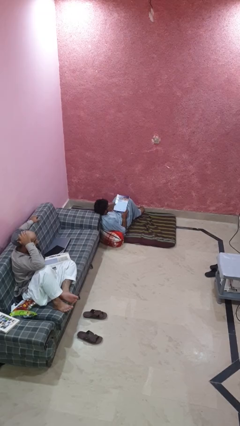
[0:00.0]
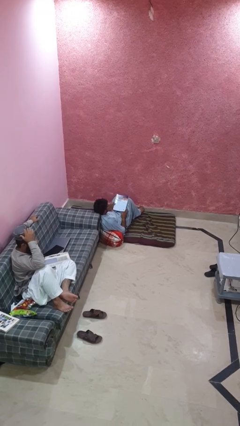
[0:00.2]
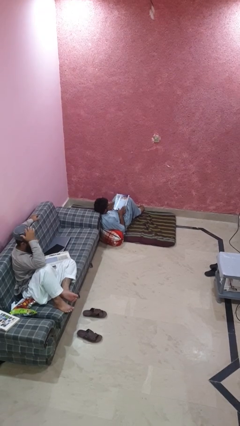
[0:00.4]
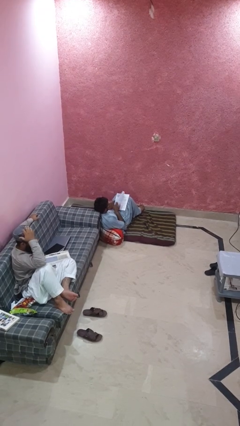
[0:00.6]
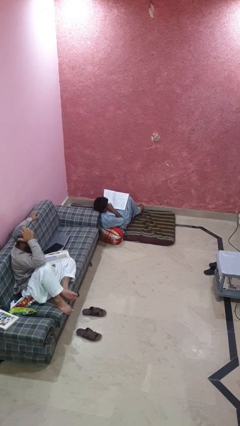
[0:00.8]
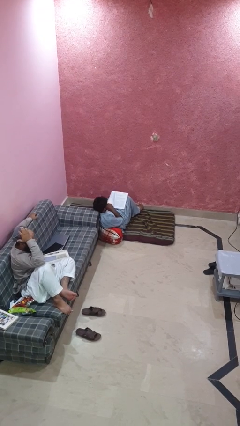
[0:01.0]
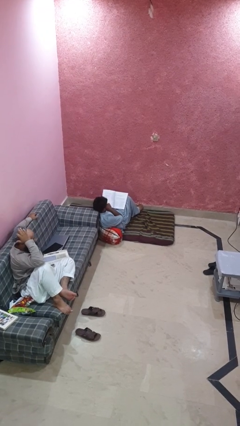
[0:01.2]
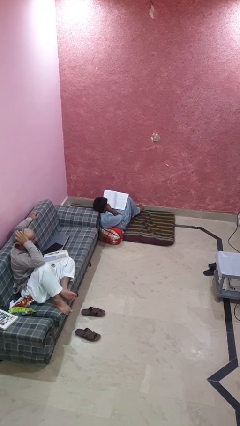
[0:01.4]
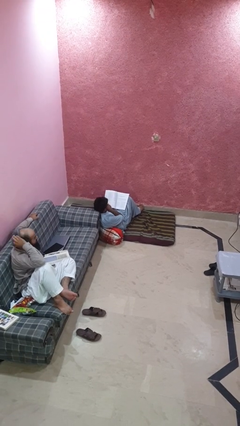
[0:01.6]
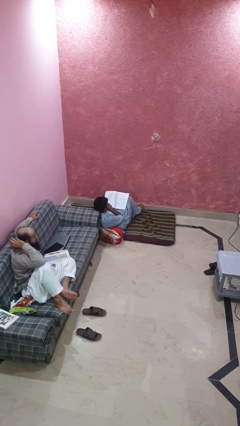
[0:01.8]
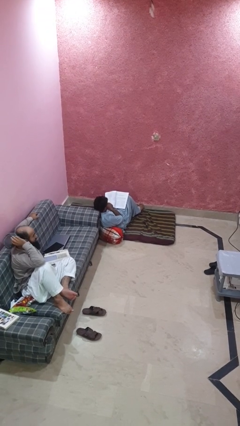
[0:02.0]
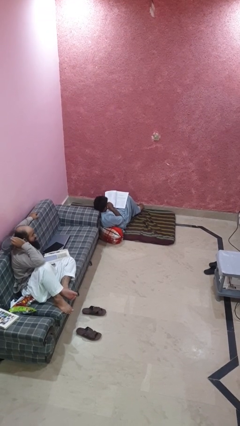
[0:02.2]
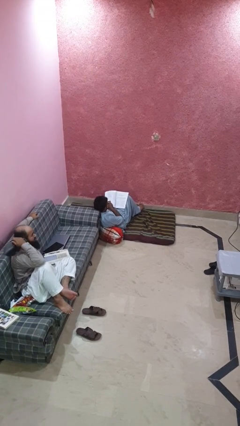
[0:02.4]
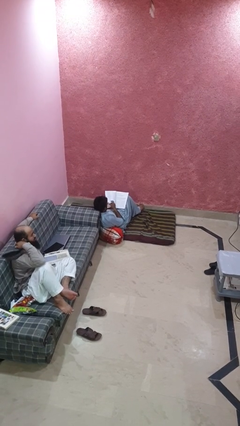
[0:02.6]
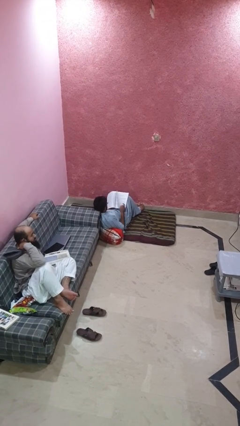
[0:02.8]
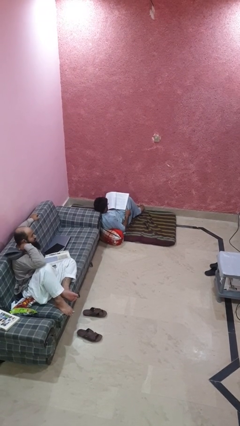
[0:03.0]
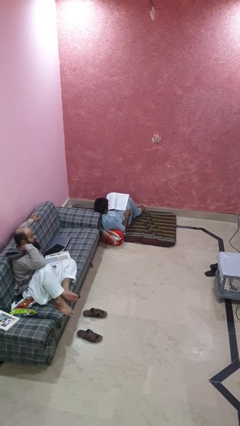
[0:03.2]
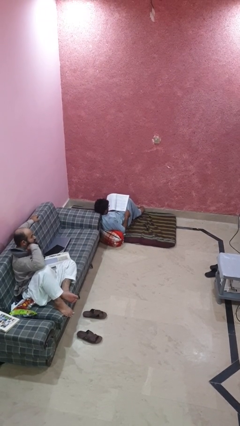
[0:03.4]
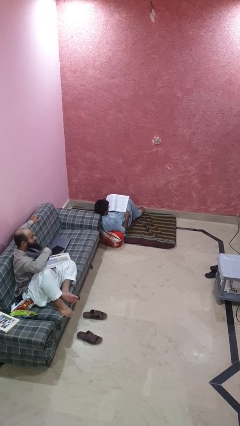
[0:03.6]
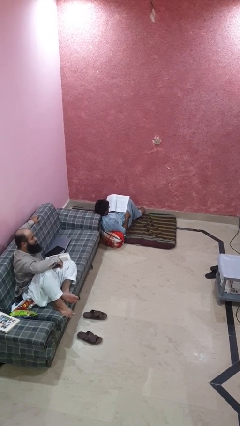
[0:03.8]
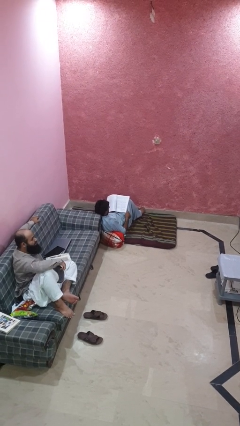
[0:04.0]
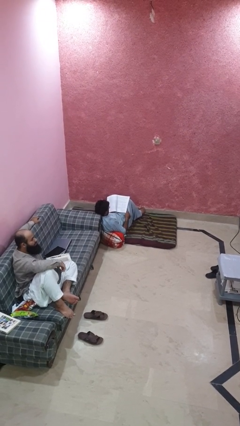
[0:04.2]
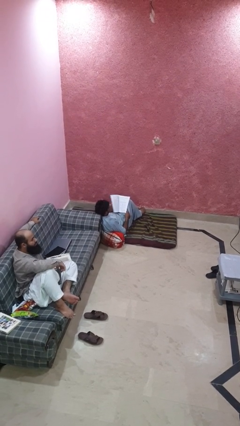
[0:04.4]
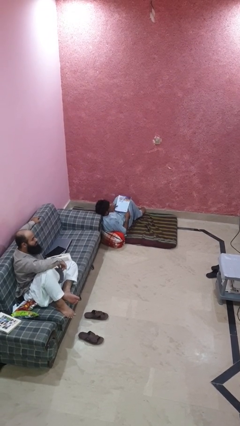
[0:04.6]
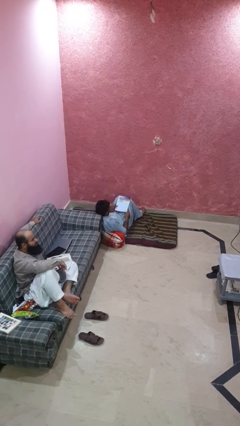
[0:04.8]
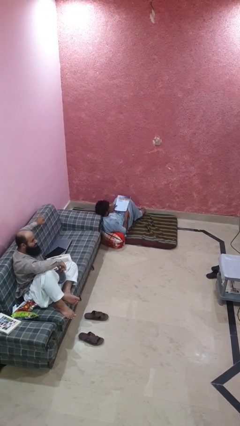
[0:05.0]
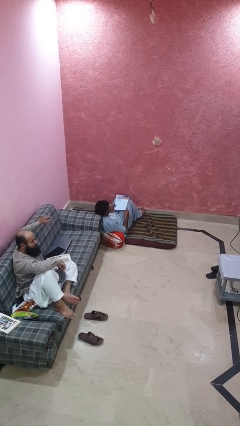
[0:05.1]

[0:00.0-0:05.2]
person reads magazine

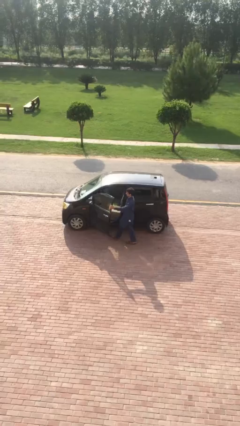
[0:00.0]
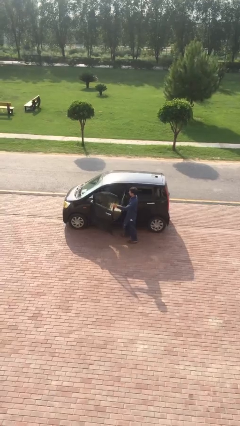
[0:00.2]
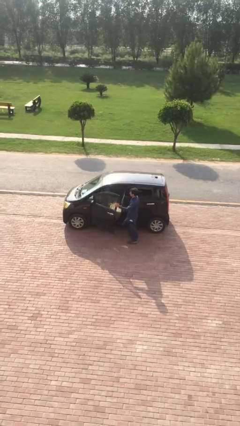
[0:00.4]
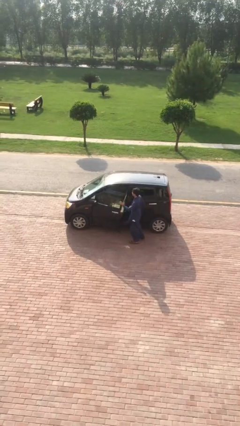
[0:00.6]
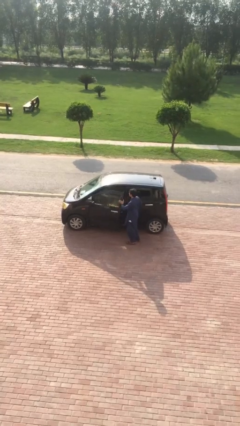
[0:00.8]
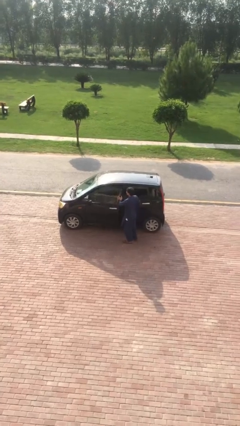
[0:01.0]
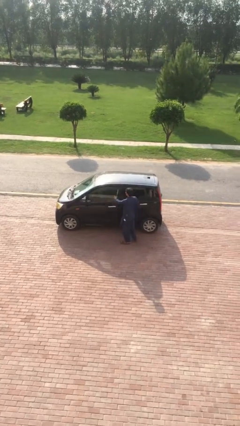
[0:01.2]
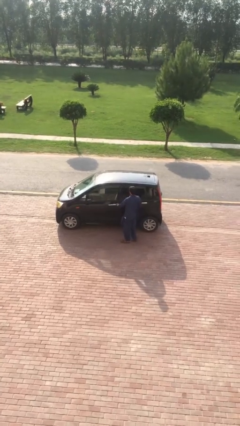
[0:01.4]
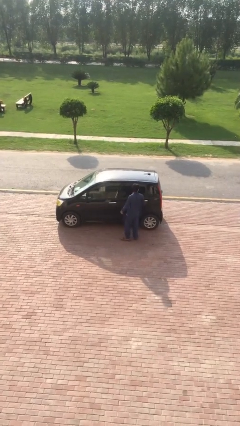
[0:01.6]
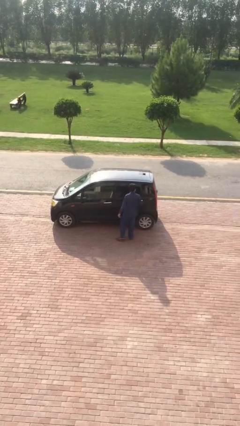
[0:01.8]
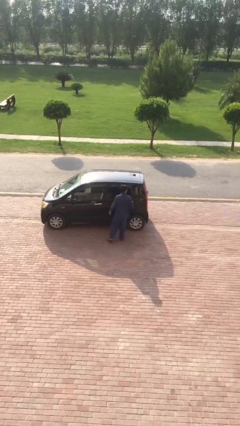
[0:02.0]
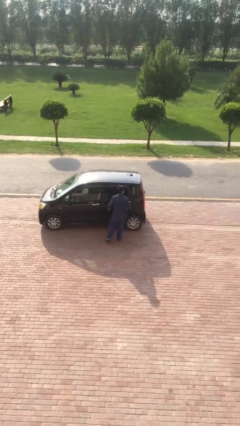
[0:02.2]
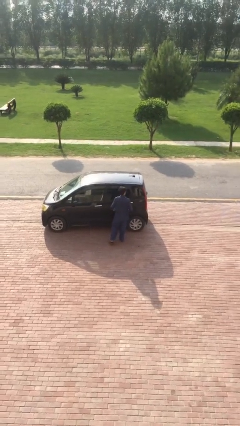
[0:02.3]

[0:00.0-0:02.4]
person closes car door

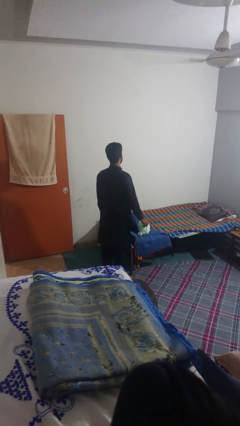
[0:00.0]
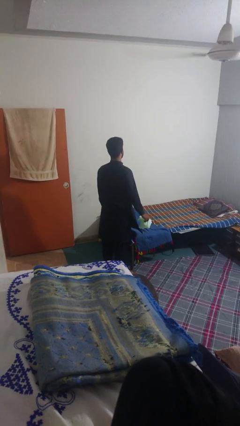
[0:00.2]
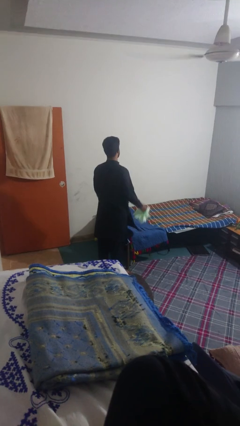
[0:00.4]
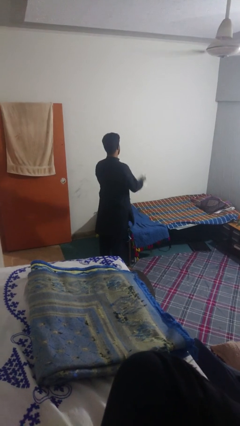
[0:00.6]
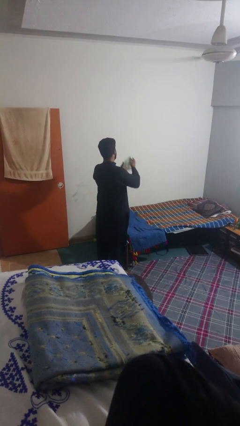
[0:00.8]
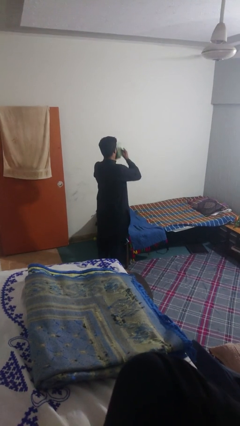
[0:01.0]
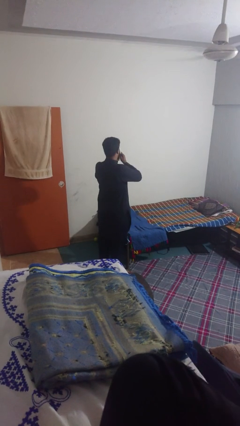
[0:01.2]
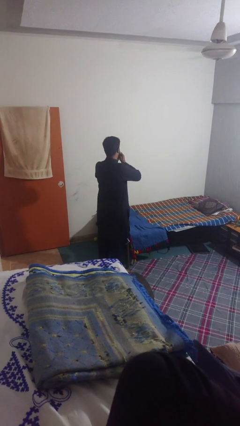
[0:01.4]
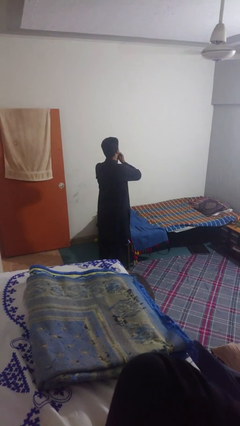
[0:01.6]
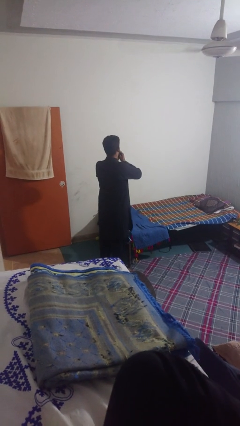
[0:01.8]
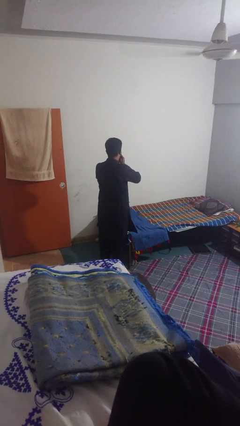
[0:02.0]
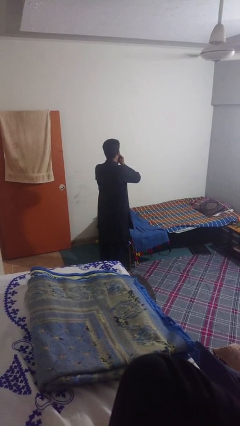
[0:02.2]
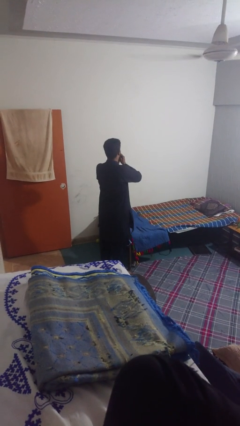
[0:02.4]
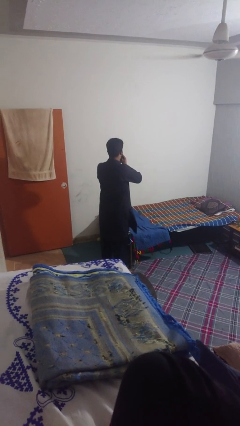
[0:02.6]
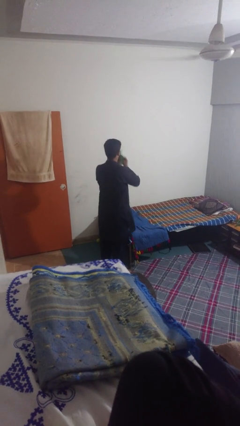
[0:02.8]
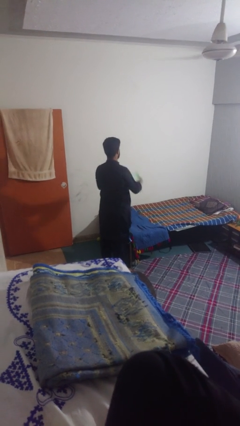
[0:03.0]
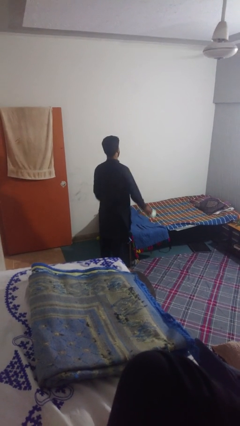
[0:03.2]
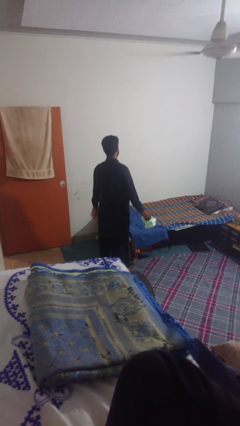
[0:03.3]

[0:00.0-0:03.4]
person blows nose

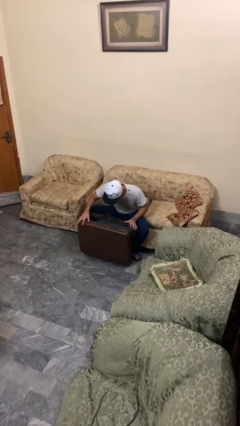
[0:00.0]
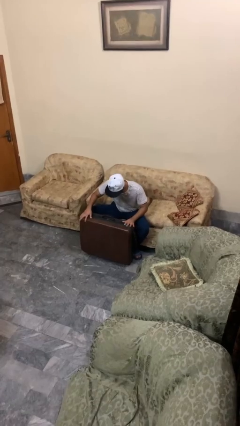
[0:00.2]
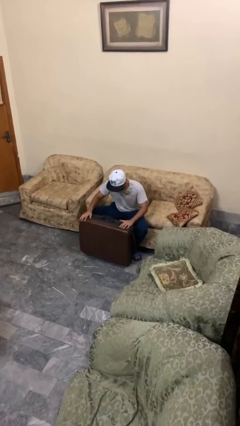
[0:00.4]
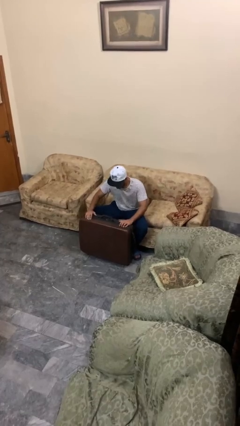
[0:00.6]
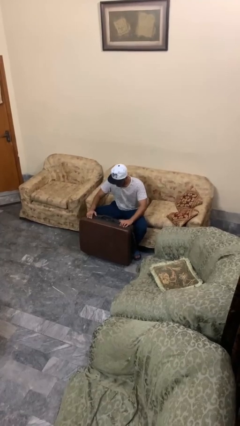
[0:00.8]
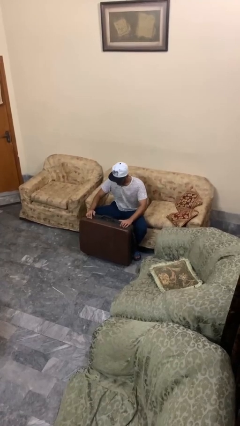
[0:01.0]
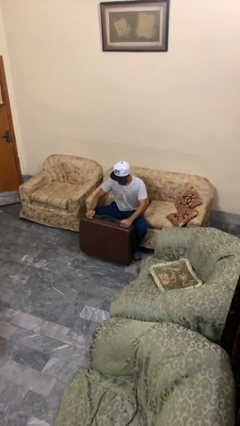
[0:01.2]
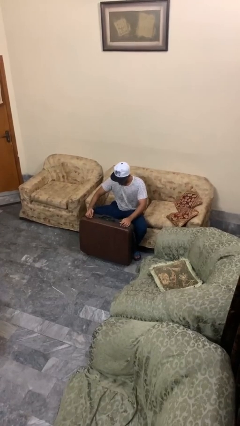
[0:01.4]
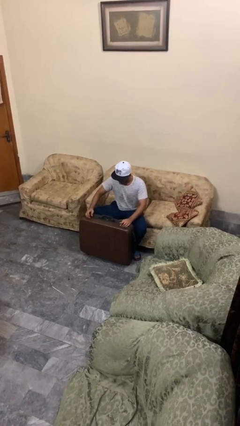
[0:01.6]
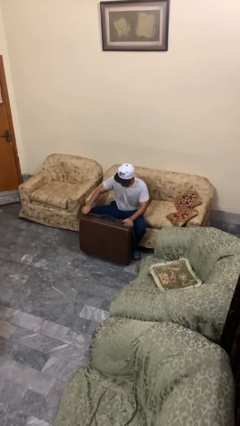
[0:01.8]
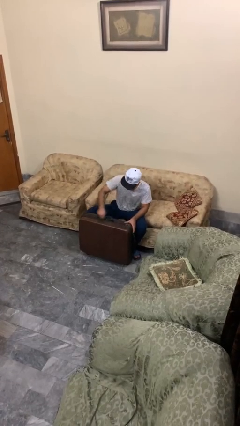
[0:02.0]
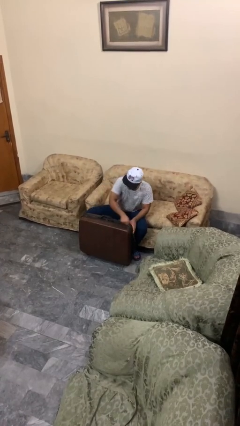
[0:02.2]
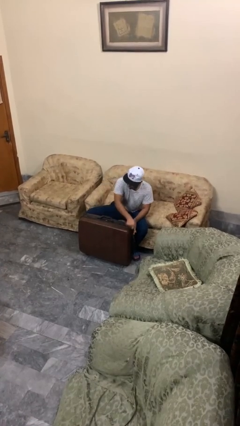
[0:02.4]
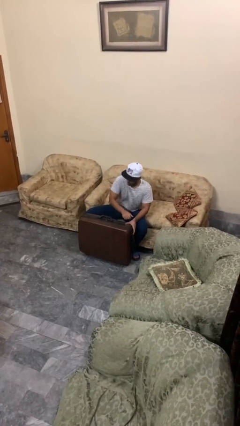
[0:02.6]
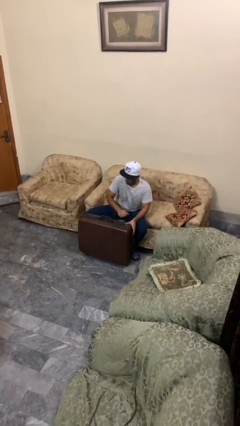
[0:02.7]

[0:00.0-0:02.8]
person closes suitcase

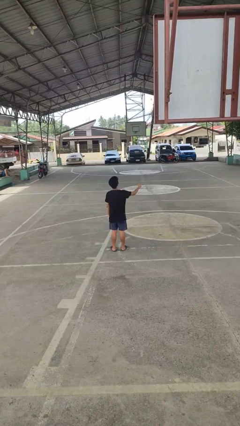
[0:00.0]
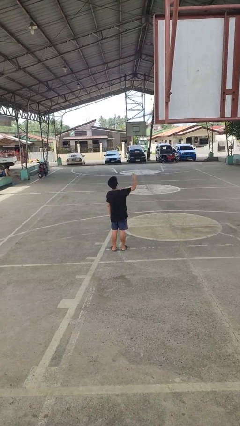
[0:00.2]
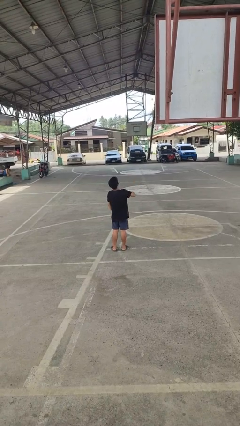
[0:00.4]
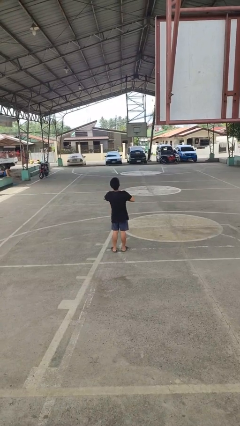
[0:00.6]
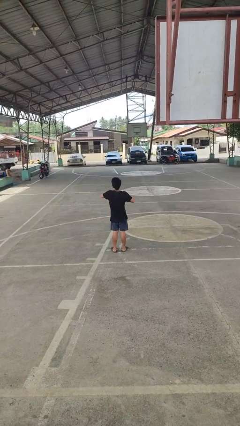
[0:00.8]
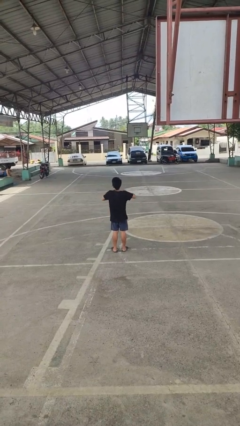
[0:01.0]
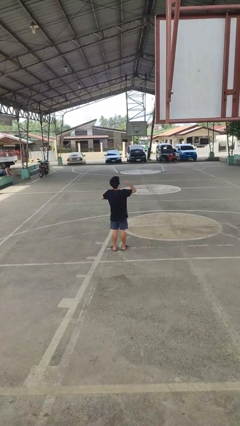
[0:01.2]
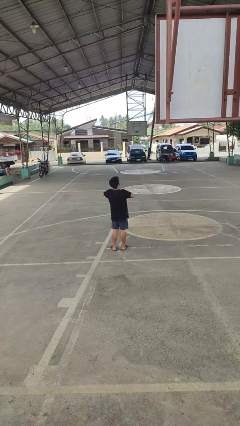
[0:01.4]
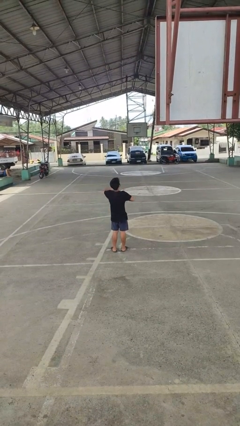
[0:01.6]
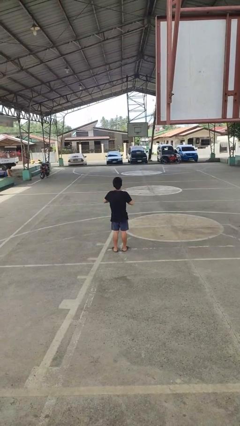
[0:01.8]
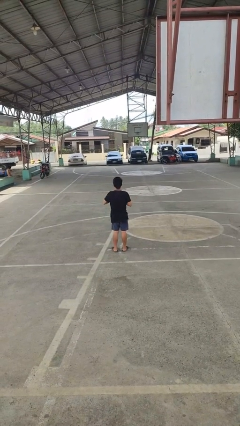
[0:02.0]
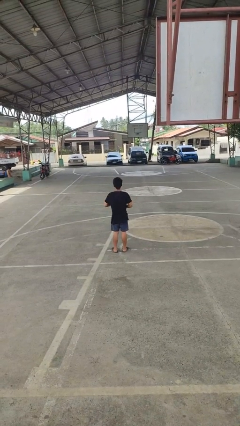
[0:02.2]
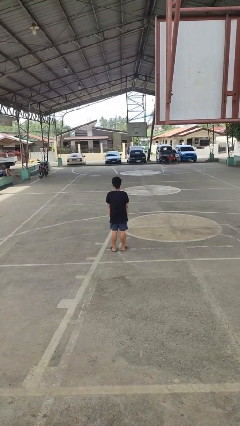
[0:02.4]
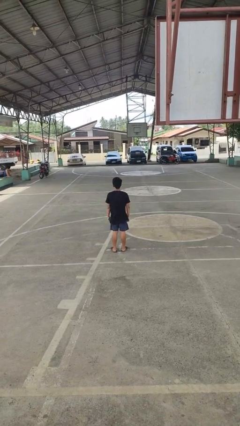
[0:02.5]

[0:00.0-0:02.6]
person drums on chest

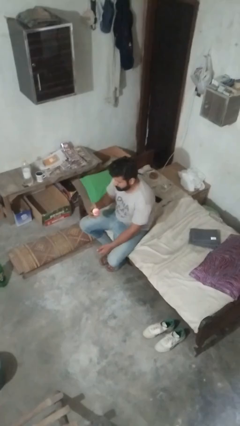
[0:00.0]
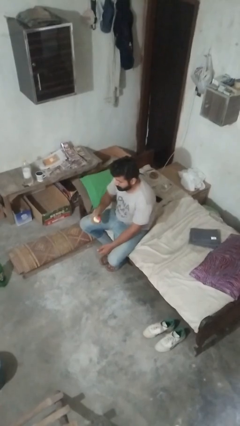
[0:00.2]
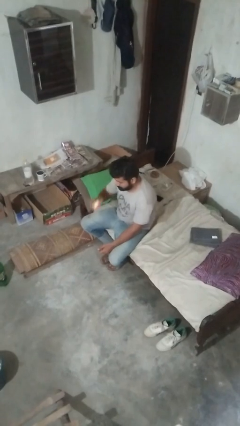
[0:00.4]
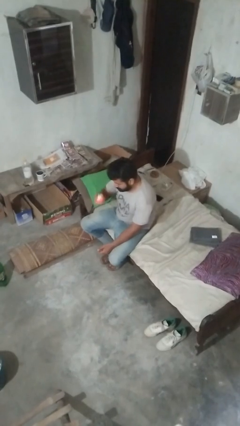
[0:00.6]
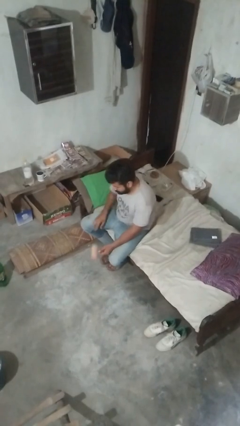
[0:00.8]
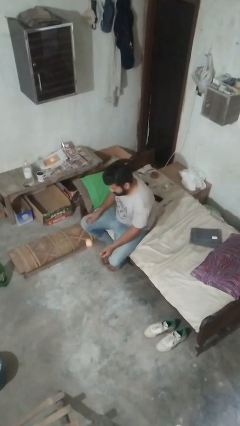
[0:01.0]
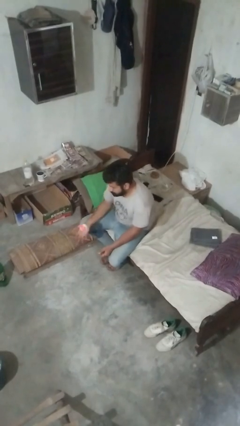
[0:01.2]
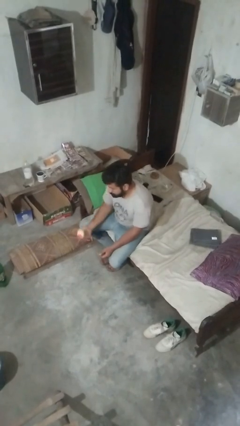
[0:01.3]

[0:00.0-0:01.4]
person bounces ball on floor
